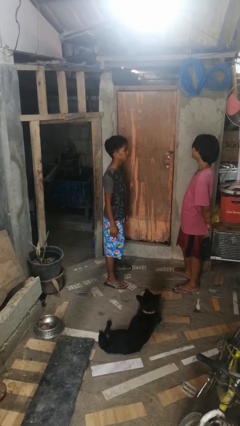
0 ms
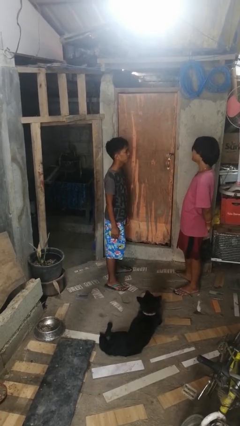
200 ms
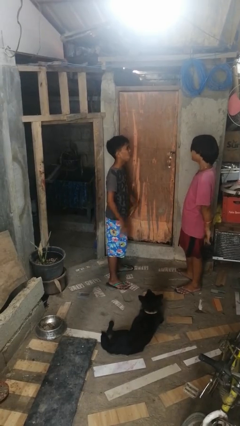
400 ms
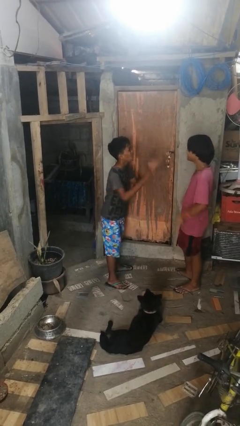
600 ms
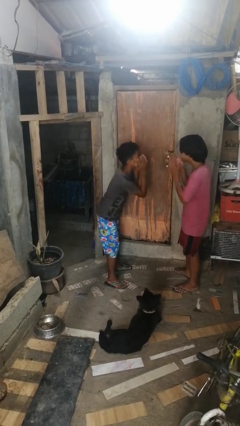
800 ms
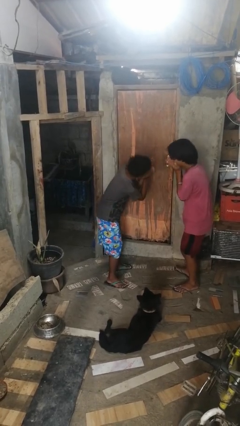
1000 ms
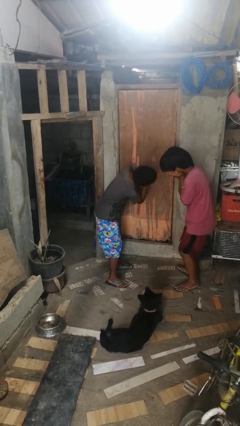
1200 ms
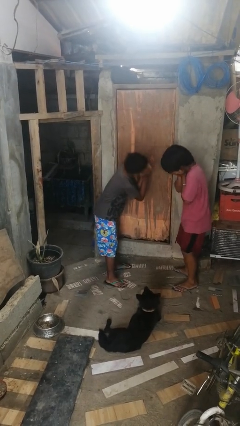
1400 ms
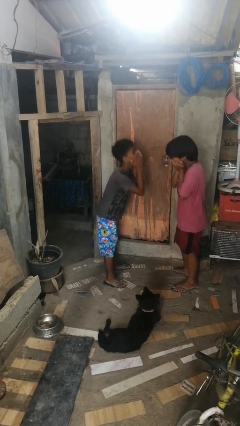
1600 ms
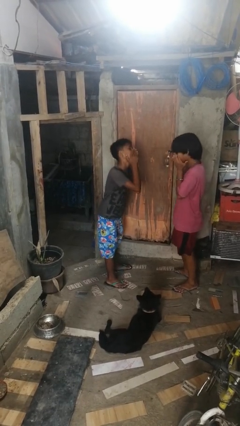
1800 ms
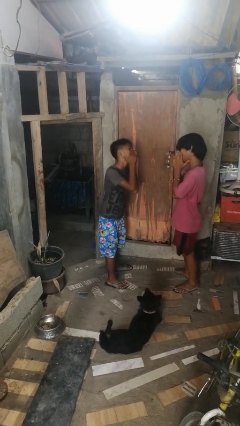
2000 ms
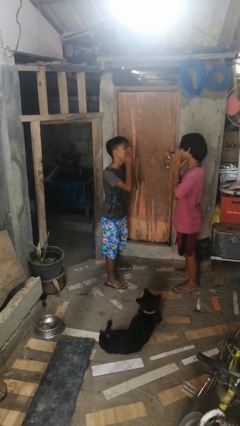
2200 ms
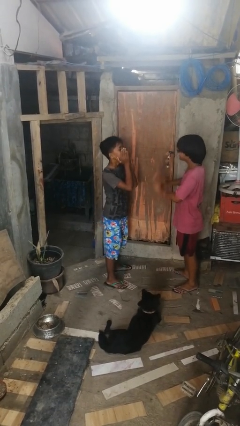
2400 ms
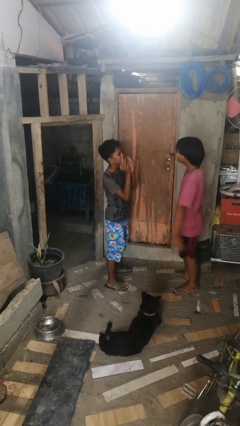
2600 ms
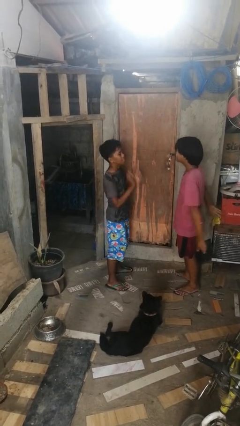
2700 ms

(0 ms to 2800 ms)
person laughs with person

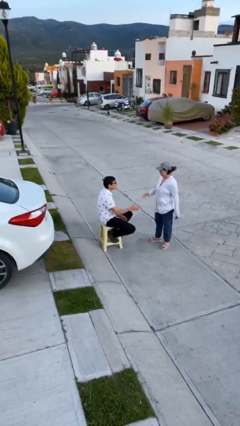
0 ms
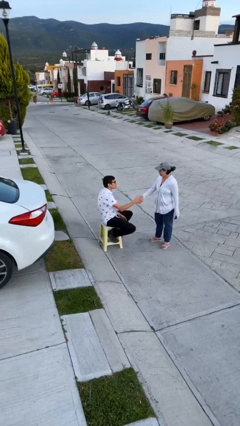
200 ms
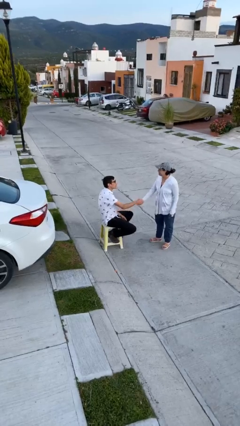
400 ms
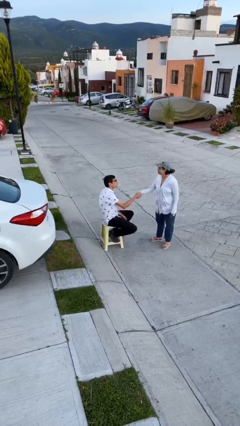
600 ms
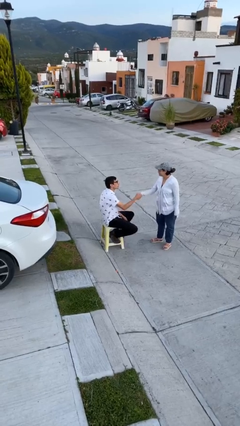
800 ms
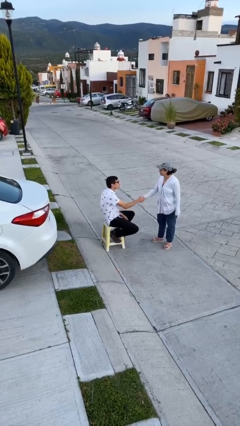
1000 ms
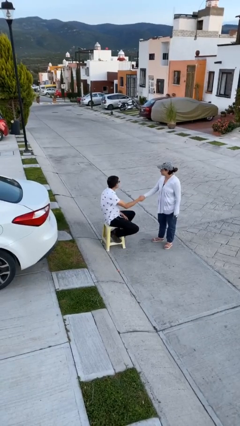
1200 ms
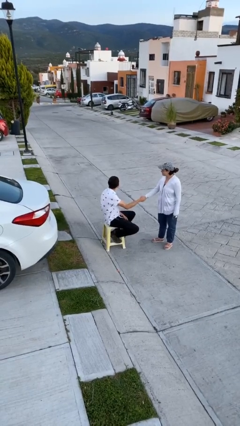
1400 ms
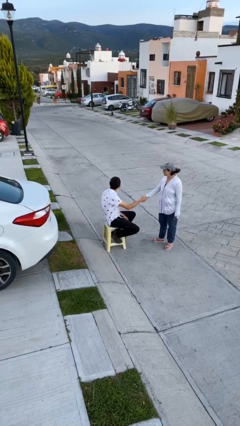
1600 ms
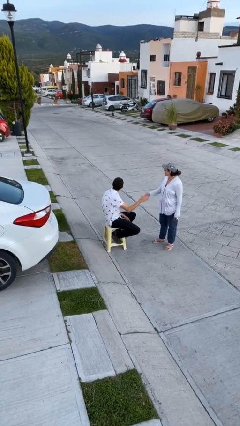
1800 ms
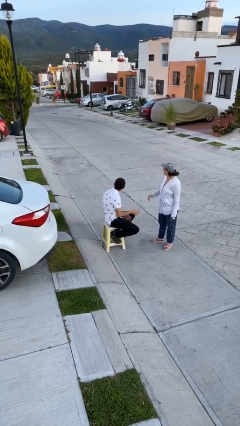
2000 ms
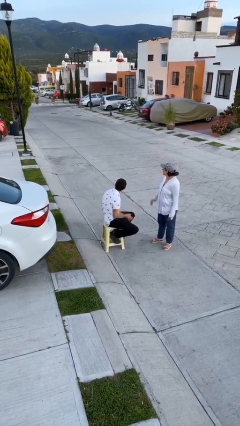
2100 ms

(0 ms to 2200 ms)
person shakes hand

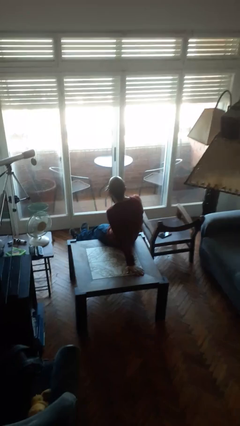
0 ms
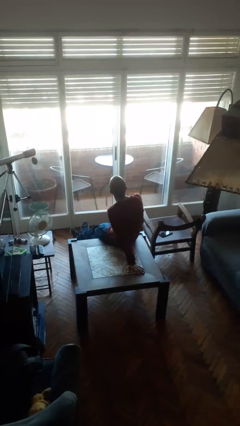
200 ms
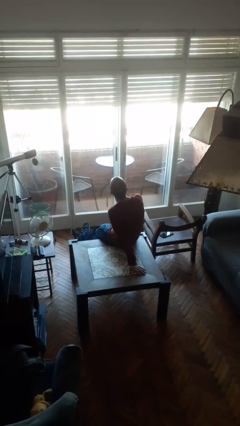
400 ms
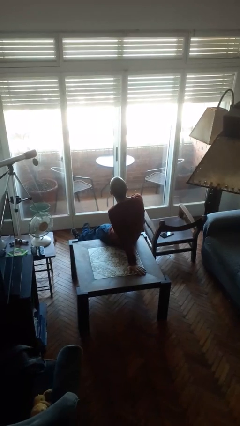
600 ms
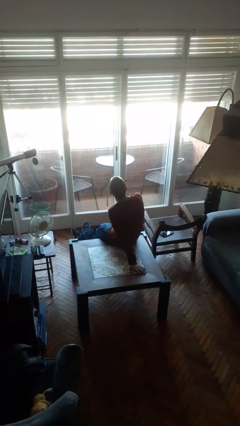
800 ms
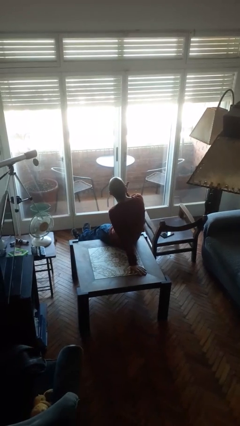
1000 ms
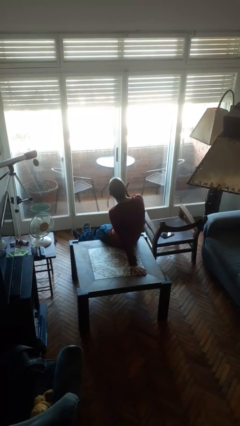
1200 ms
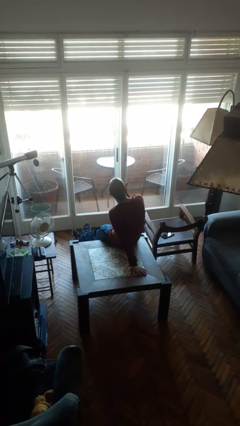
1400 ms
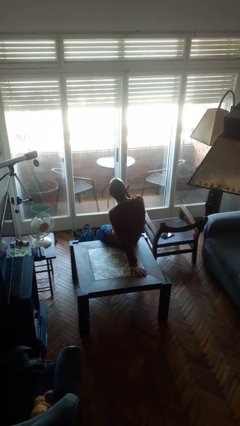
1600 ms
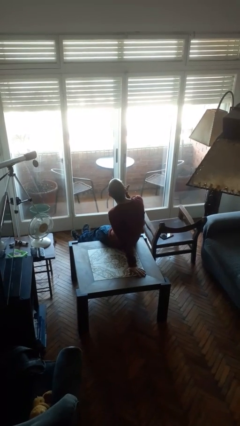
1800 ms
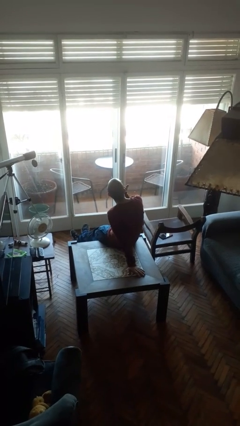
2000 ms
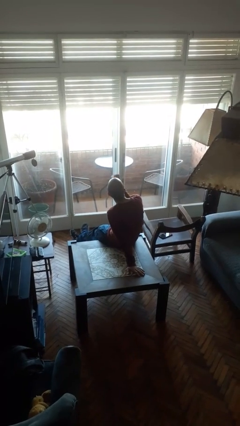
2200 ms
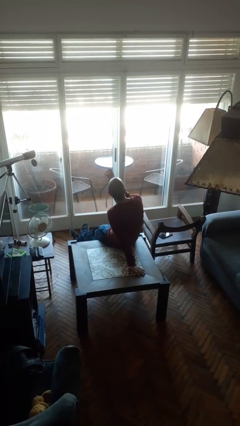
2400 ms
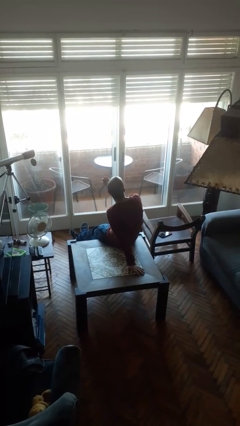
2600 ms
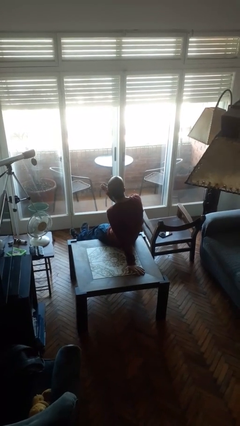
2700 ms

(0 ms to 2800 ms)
person licks fingers

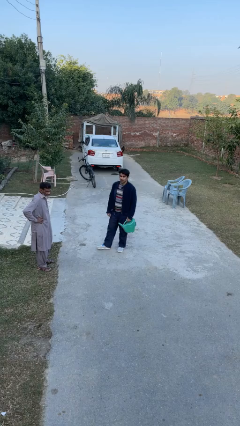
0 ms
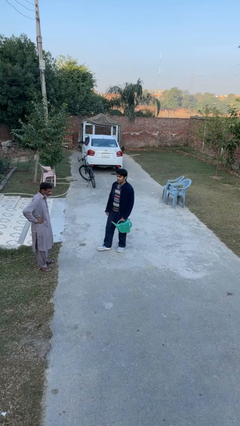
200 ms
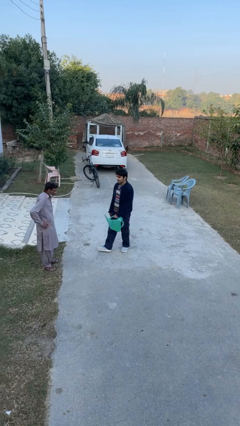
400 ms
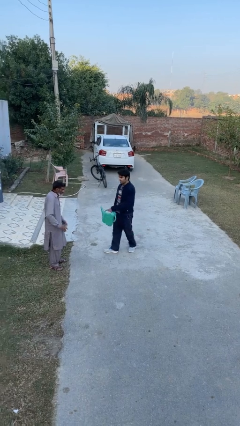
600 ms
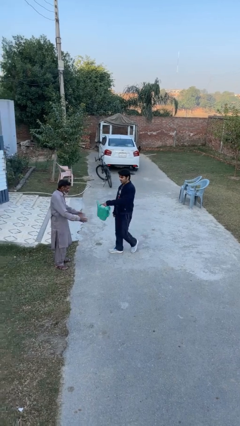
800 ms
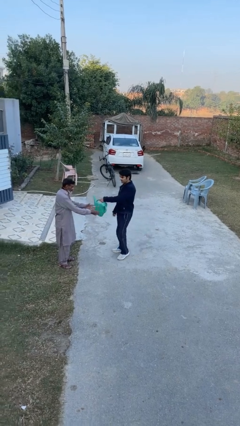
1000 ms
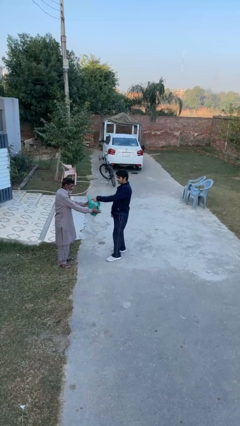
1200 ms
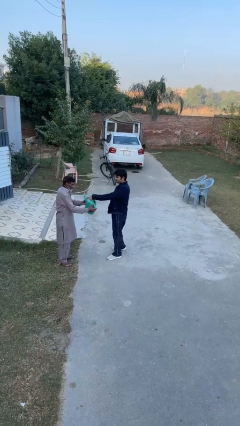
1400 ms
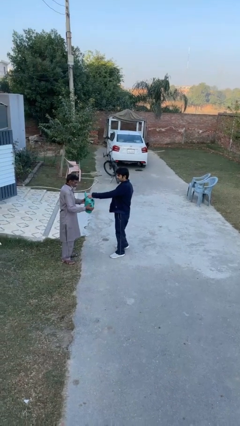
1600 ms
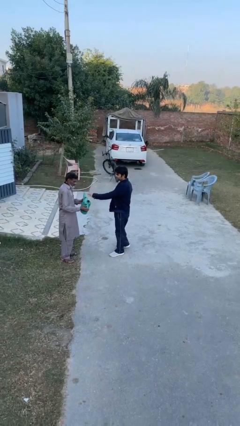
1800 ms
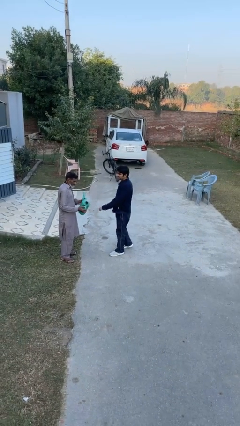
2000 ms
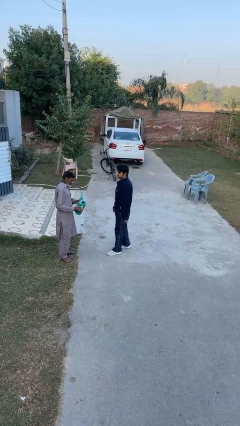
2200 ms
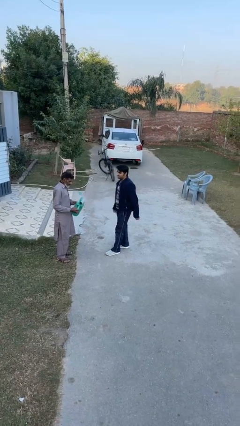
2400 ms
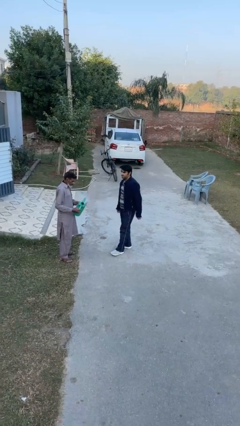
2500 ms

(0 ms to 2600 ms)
person transfers object to person

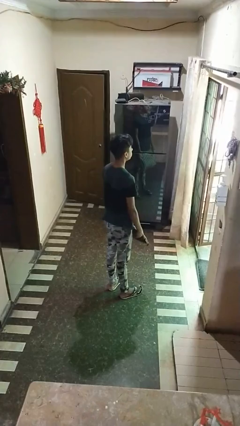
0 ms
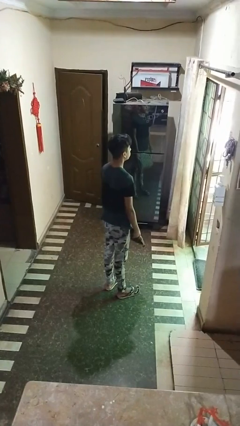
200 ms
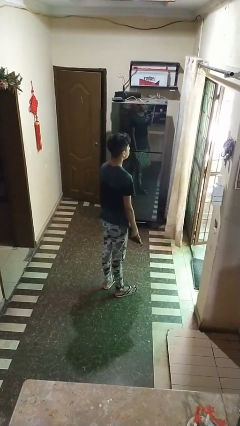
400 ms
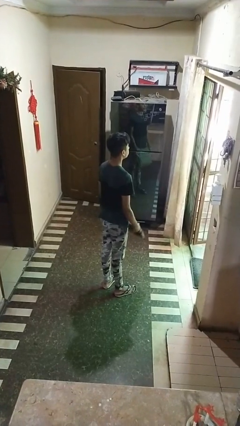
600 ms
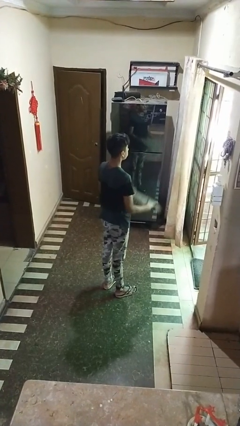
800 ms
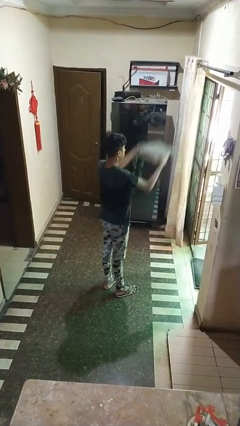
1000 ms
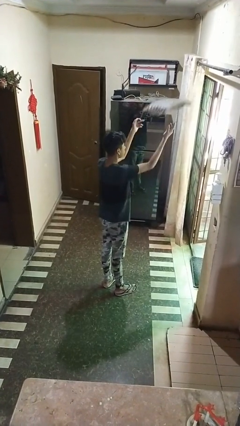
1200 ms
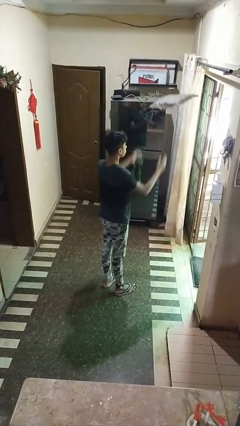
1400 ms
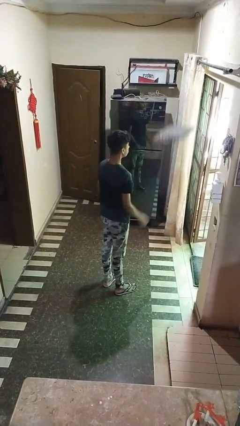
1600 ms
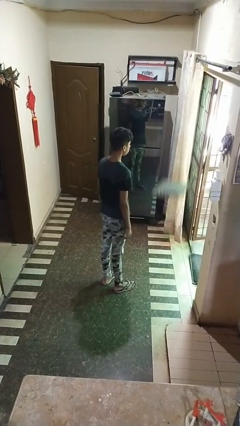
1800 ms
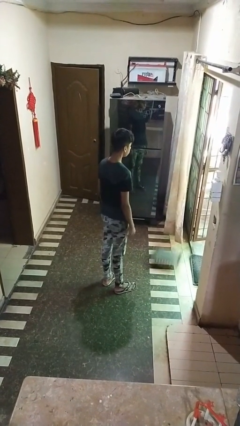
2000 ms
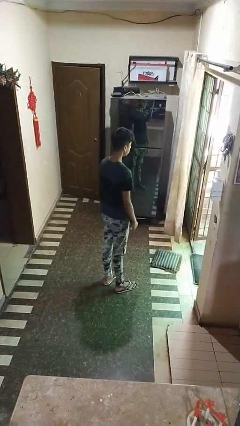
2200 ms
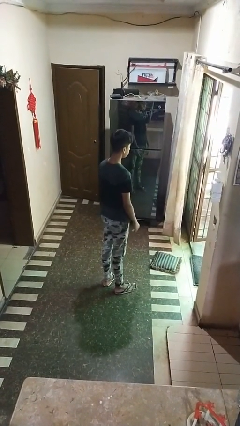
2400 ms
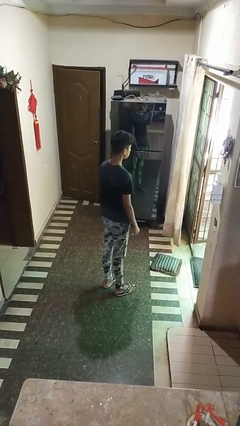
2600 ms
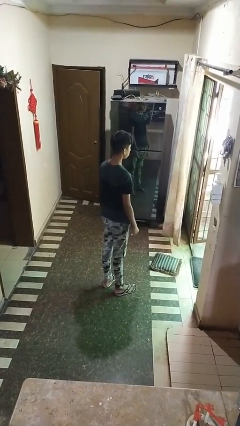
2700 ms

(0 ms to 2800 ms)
person throws object into air

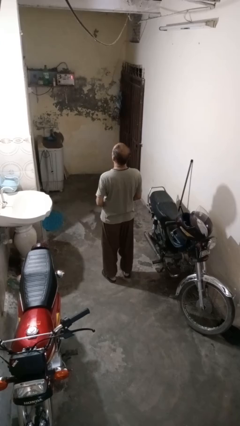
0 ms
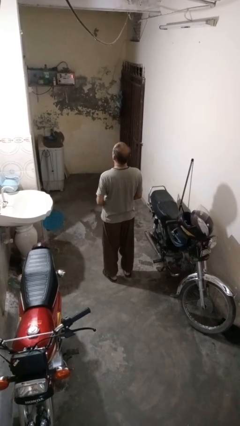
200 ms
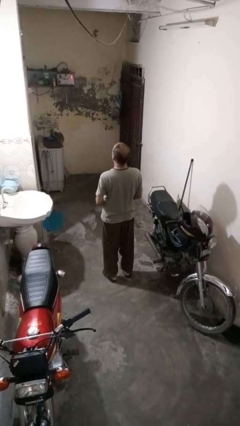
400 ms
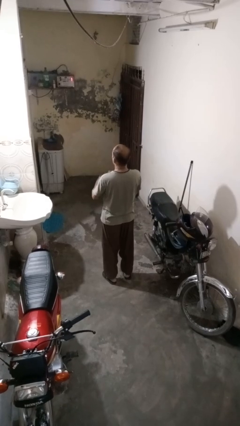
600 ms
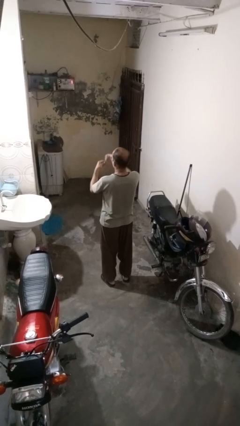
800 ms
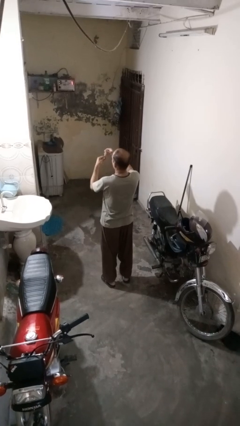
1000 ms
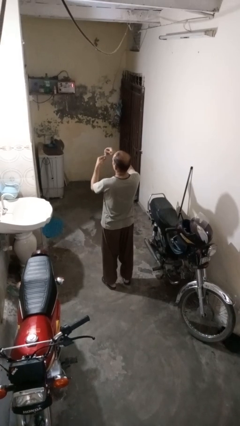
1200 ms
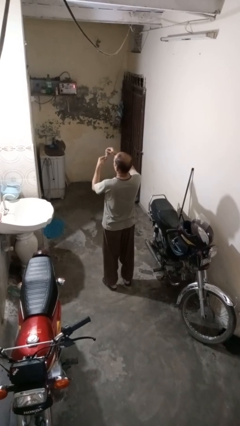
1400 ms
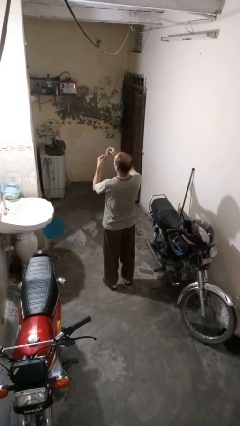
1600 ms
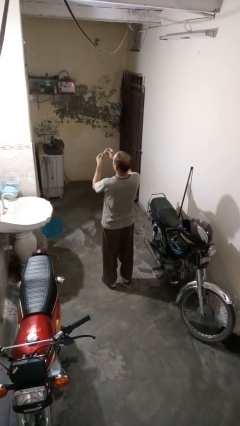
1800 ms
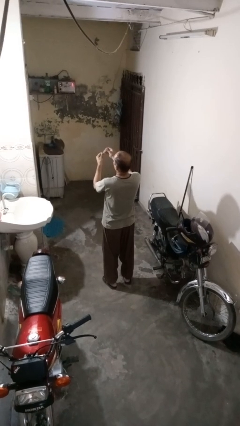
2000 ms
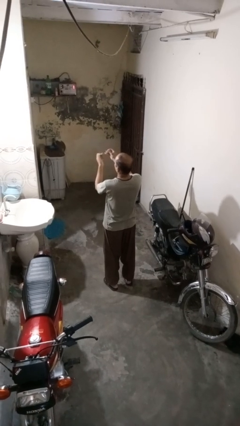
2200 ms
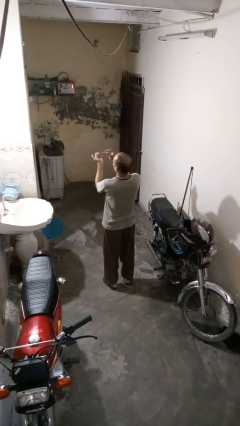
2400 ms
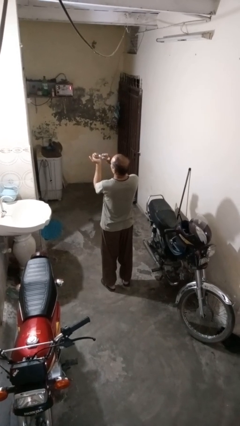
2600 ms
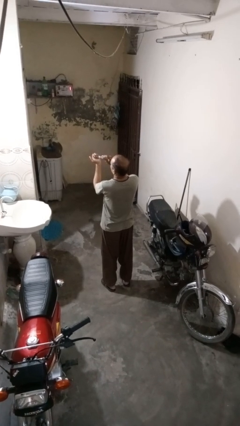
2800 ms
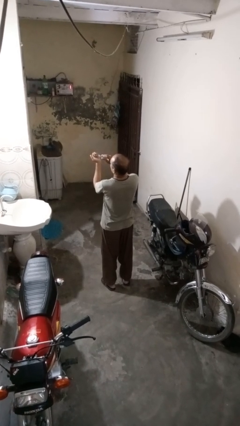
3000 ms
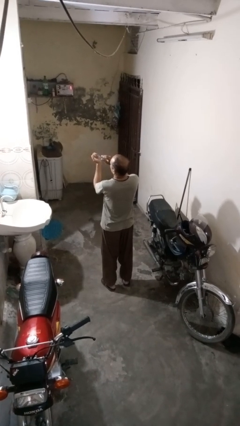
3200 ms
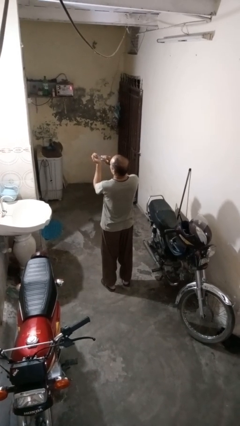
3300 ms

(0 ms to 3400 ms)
person clips fingernails

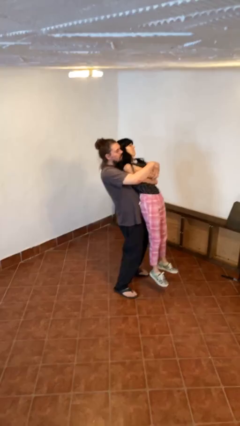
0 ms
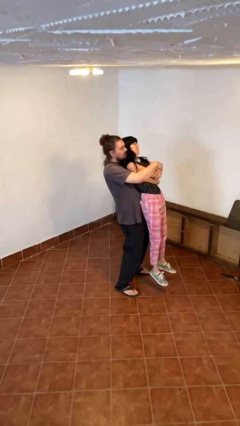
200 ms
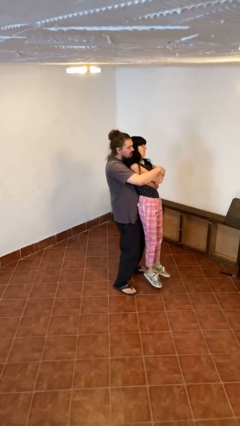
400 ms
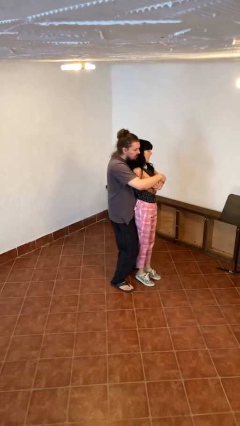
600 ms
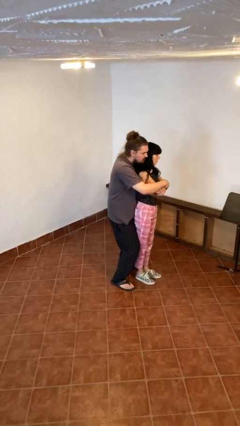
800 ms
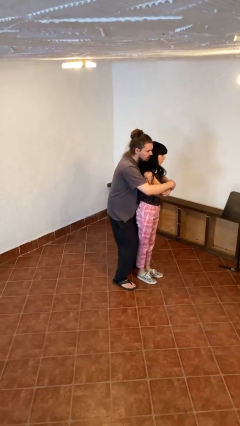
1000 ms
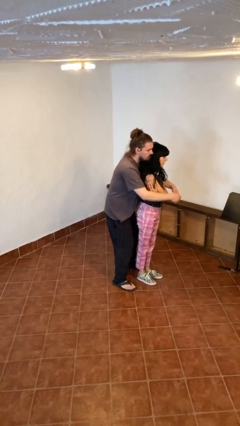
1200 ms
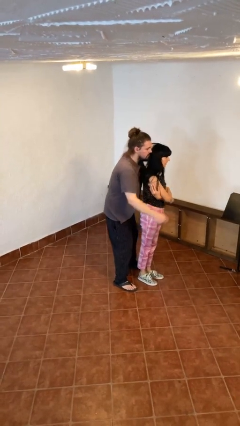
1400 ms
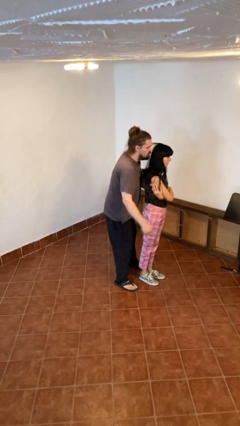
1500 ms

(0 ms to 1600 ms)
person puts down person
